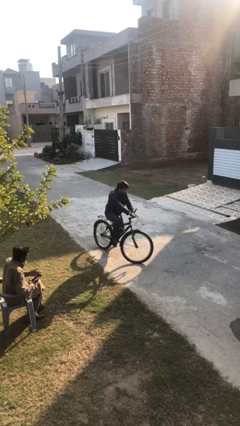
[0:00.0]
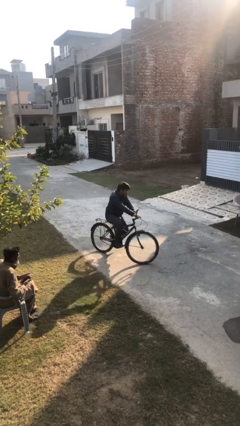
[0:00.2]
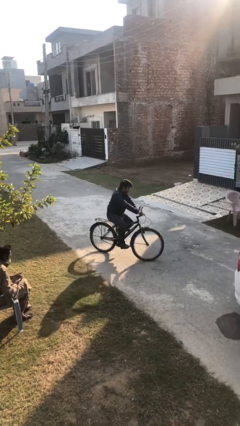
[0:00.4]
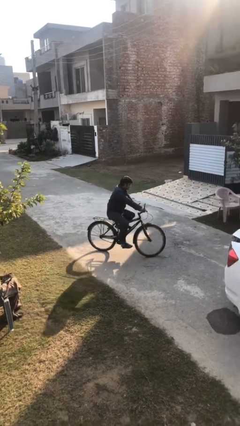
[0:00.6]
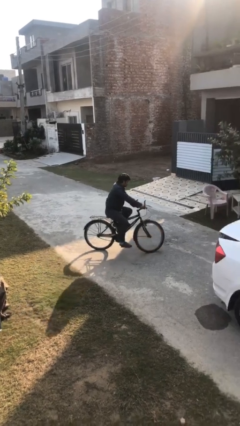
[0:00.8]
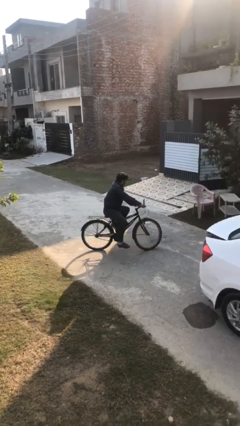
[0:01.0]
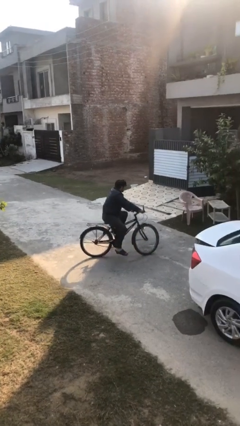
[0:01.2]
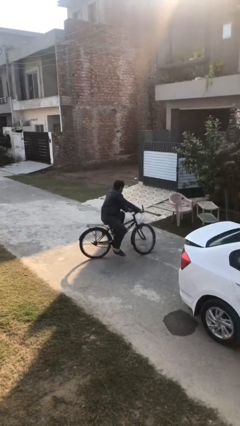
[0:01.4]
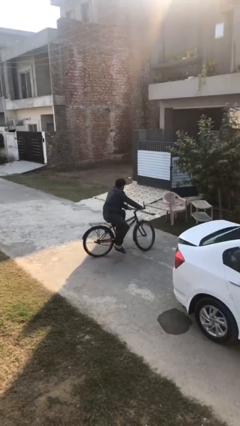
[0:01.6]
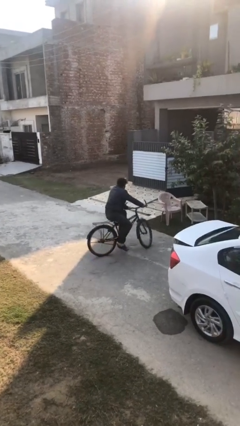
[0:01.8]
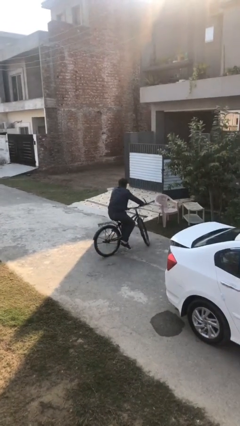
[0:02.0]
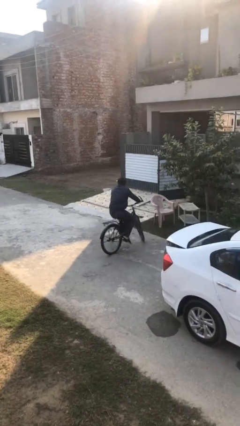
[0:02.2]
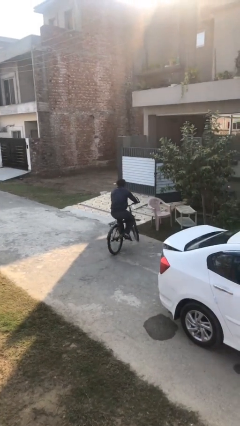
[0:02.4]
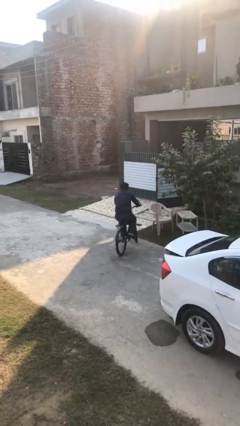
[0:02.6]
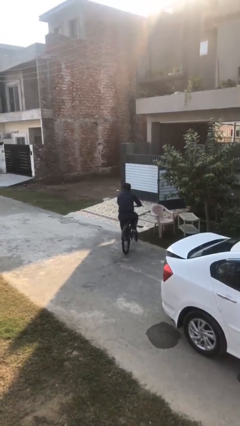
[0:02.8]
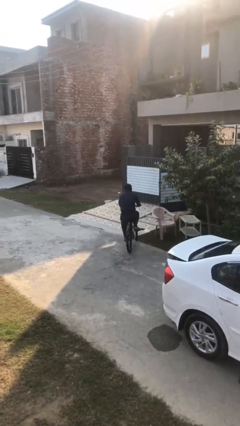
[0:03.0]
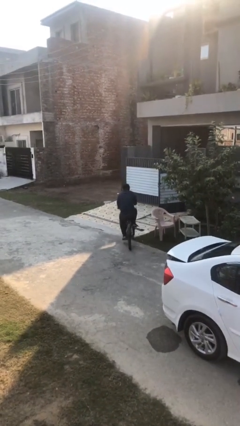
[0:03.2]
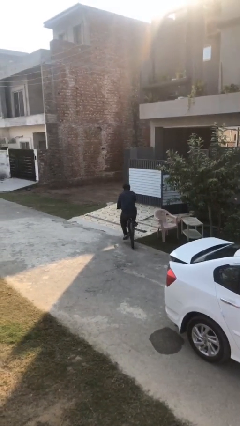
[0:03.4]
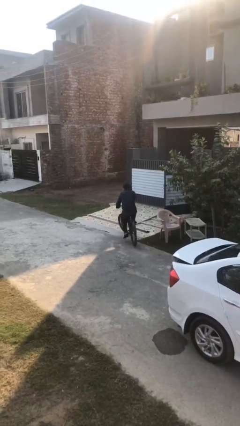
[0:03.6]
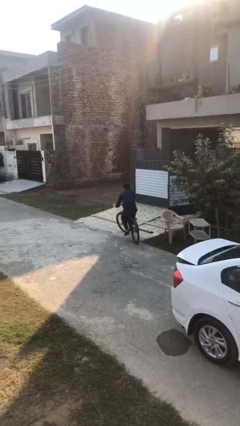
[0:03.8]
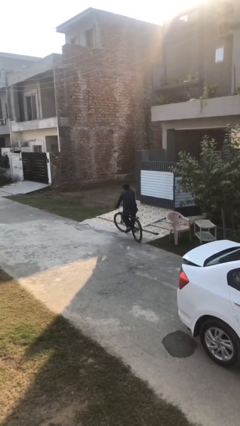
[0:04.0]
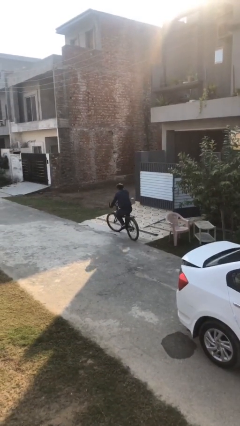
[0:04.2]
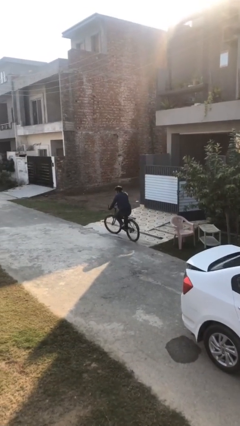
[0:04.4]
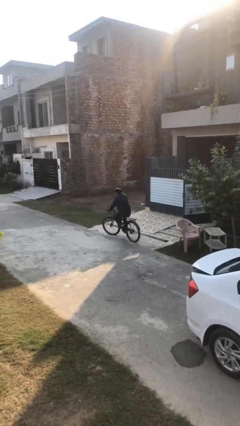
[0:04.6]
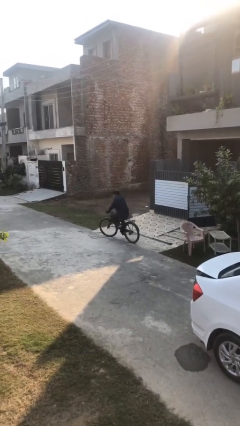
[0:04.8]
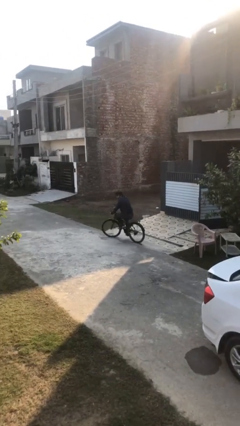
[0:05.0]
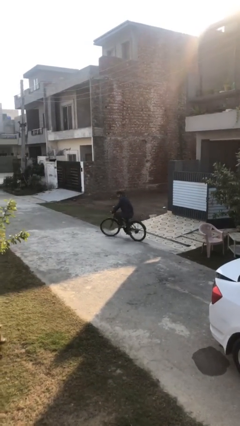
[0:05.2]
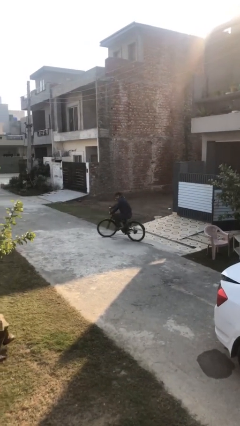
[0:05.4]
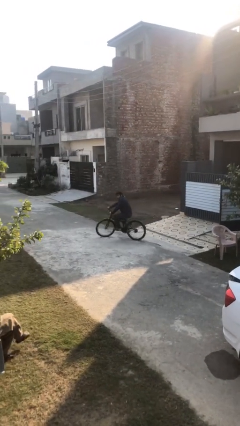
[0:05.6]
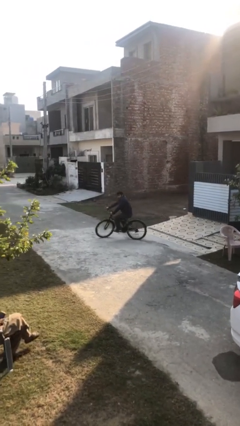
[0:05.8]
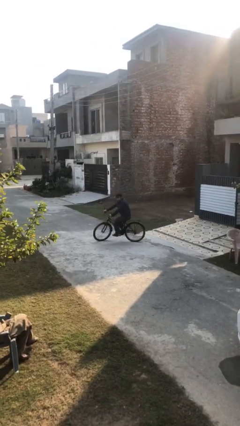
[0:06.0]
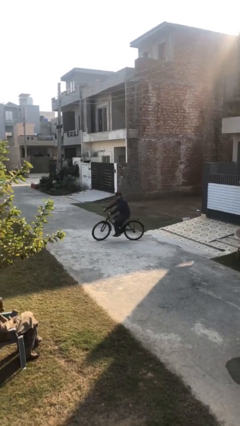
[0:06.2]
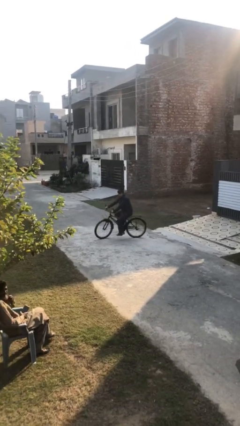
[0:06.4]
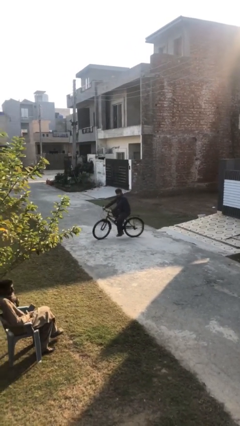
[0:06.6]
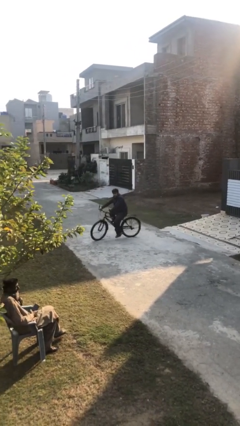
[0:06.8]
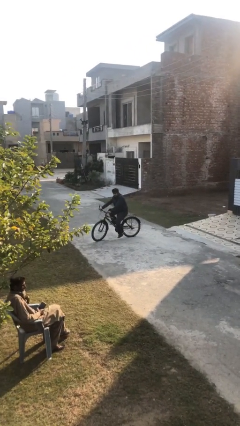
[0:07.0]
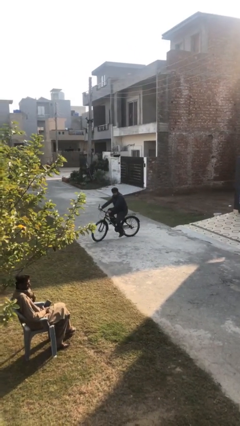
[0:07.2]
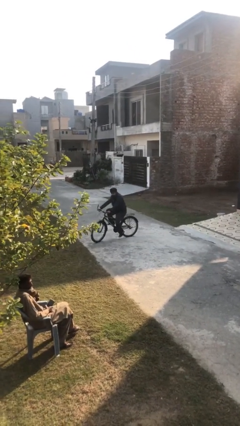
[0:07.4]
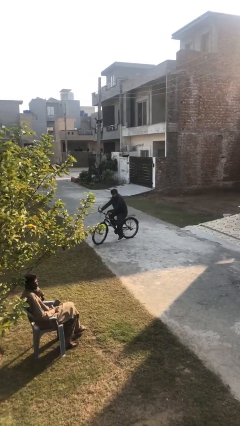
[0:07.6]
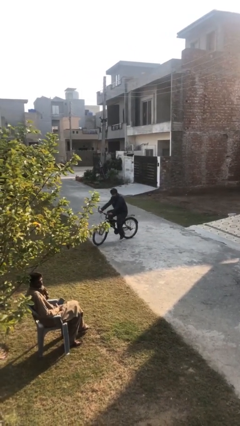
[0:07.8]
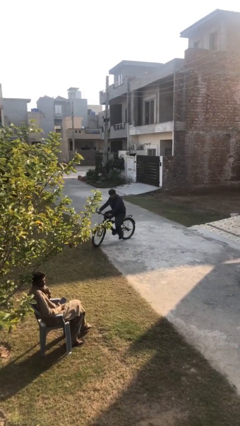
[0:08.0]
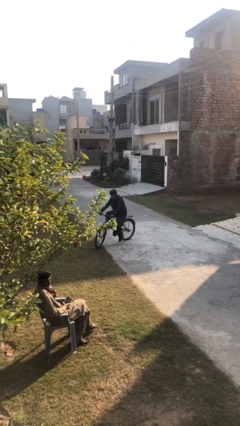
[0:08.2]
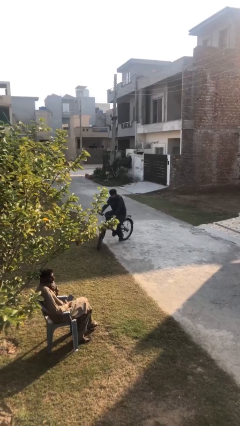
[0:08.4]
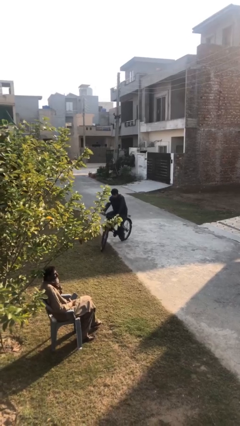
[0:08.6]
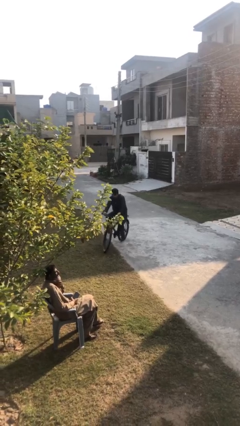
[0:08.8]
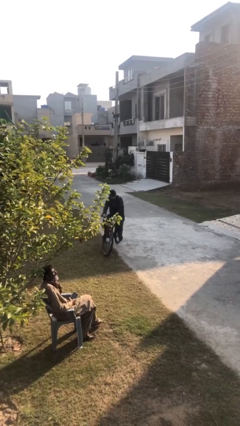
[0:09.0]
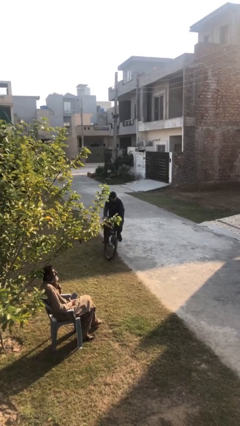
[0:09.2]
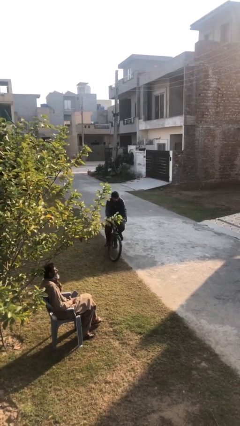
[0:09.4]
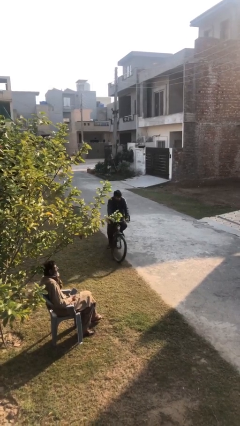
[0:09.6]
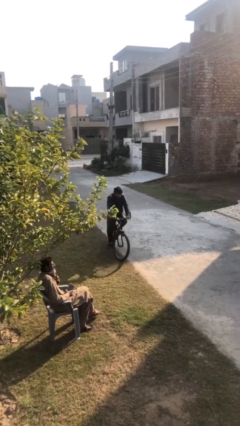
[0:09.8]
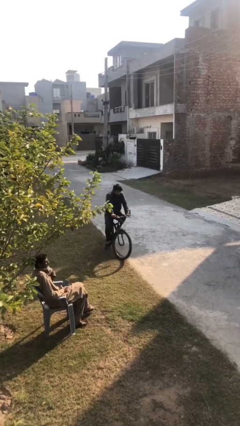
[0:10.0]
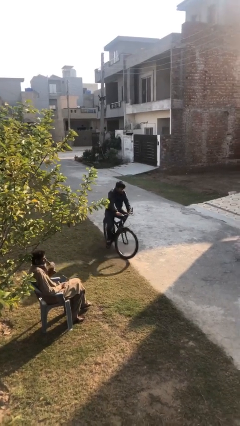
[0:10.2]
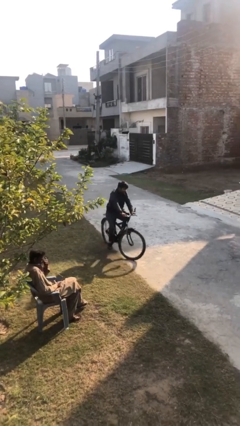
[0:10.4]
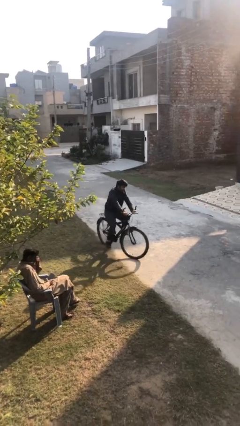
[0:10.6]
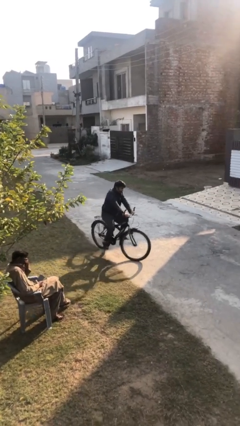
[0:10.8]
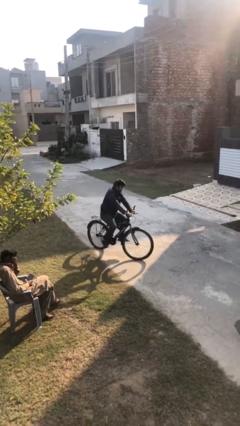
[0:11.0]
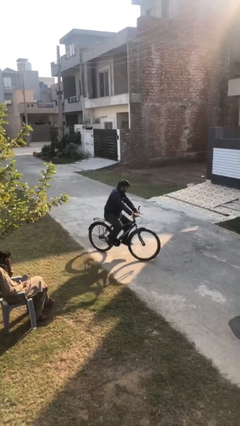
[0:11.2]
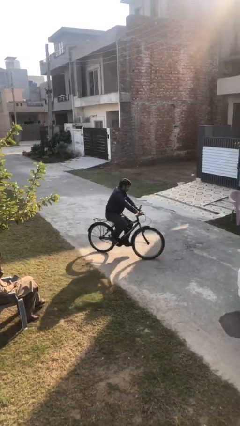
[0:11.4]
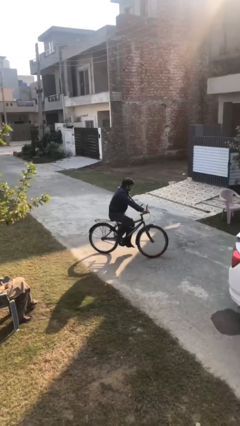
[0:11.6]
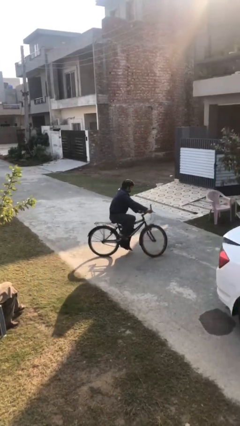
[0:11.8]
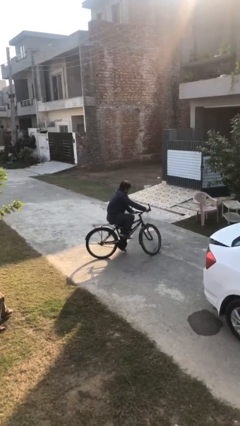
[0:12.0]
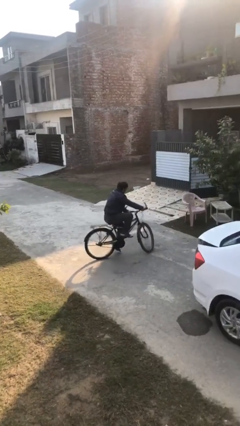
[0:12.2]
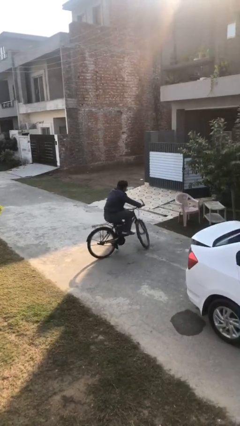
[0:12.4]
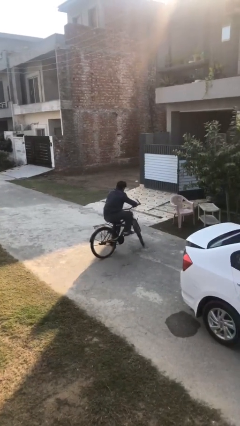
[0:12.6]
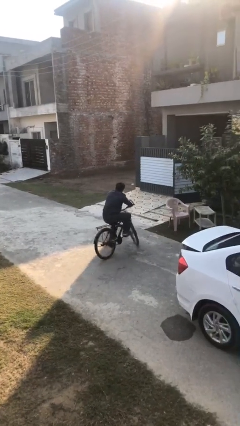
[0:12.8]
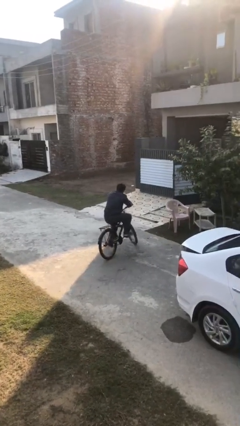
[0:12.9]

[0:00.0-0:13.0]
person rides bicycle

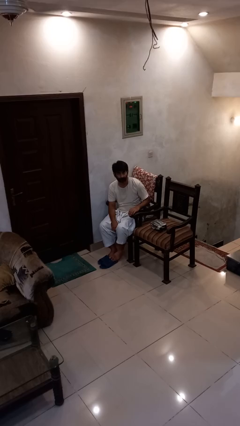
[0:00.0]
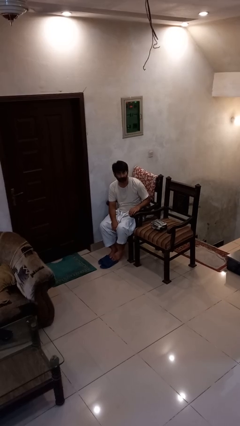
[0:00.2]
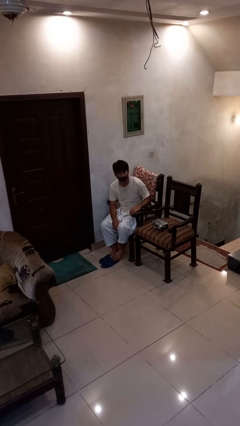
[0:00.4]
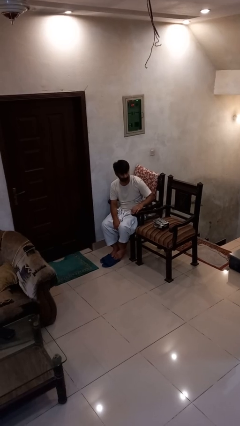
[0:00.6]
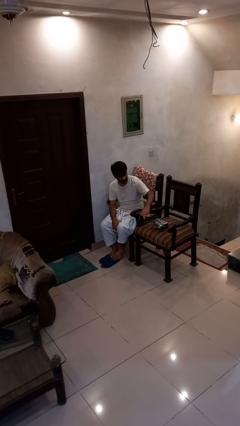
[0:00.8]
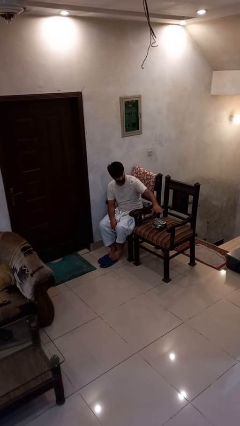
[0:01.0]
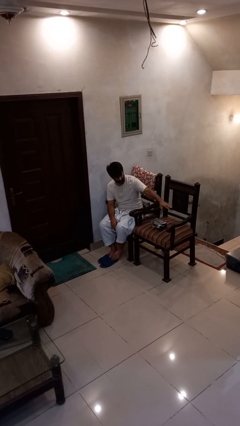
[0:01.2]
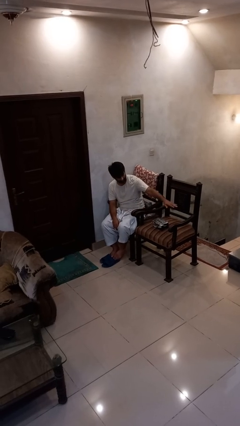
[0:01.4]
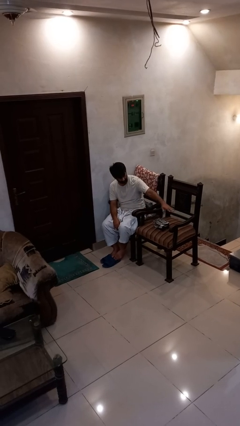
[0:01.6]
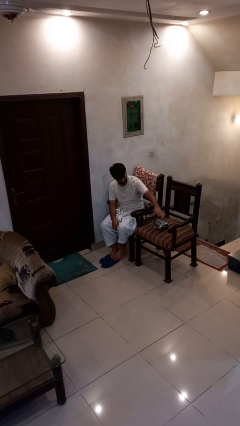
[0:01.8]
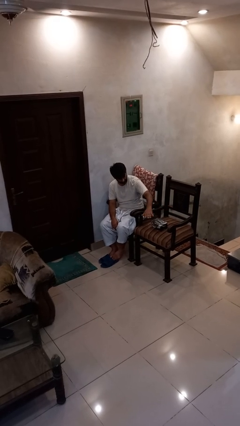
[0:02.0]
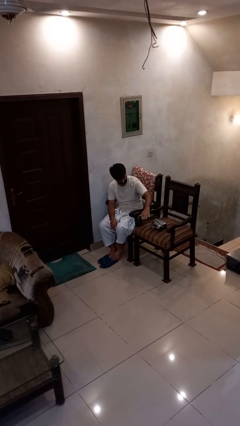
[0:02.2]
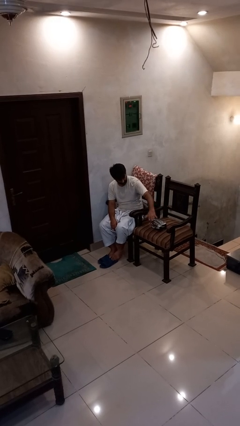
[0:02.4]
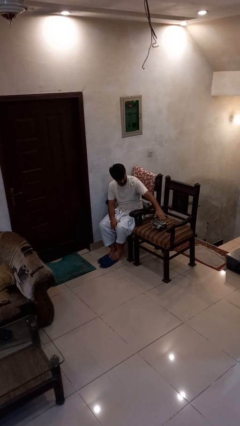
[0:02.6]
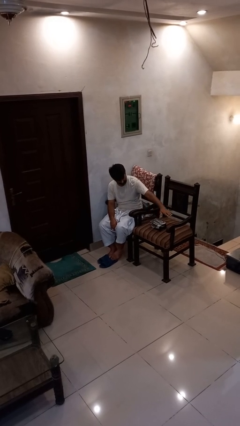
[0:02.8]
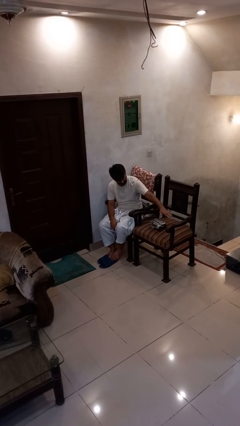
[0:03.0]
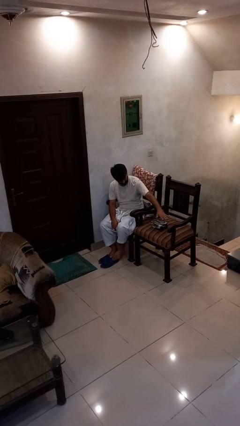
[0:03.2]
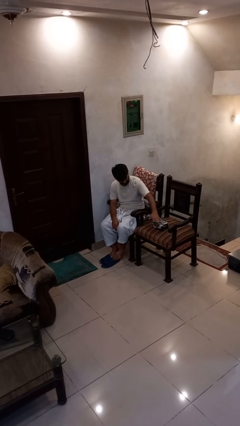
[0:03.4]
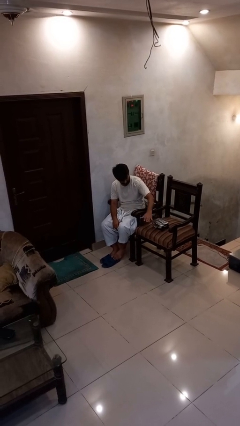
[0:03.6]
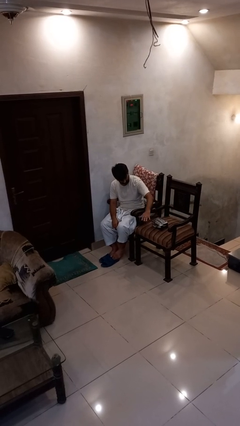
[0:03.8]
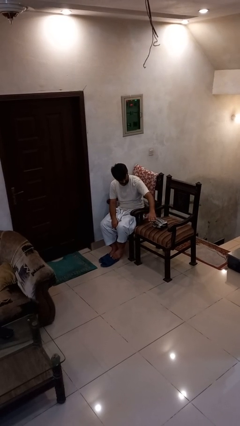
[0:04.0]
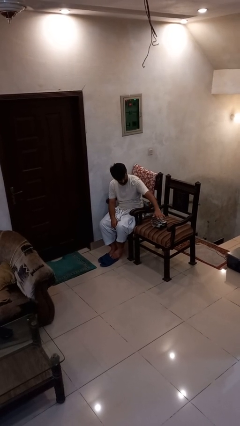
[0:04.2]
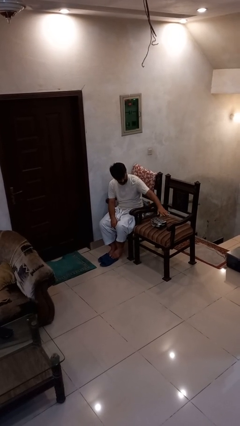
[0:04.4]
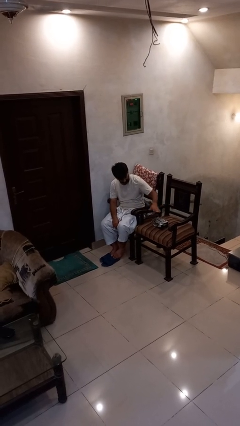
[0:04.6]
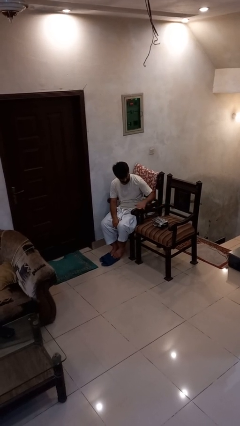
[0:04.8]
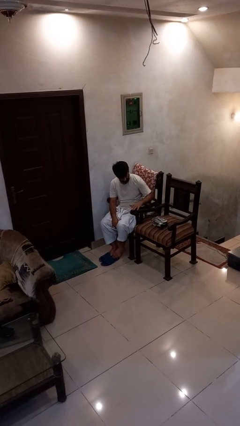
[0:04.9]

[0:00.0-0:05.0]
person waves hand over object
